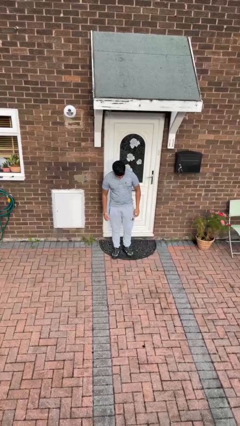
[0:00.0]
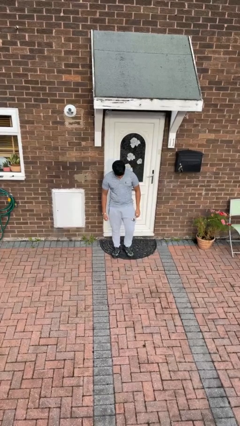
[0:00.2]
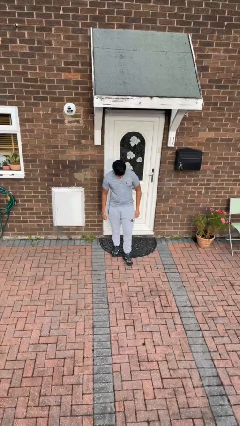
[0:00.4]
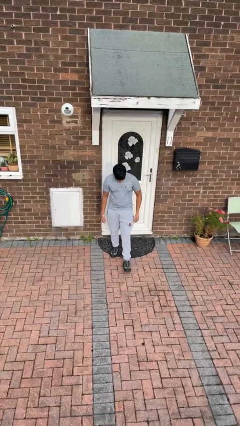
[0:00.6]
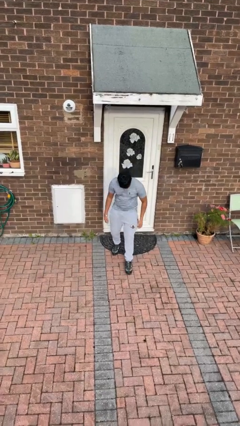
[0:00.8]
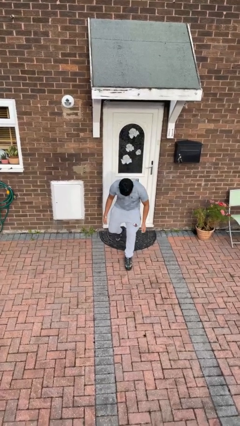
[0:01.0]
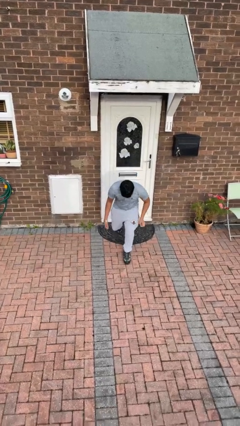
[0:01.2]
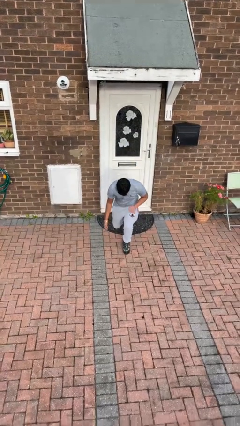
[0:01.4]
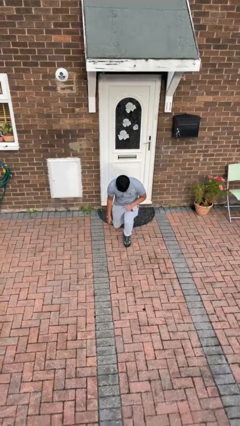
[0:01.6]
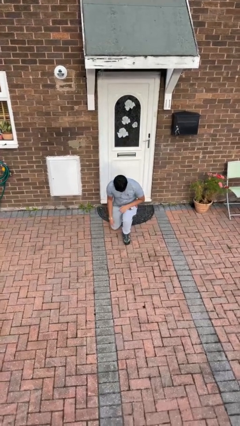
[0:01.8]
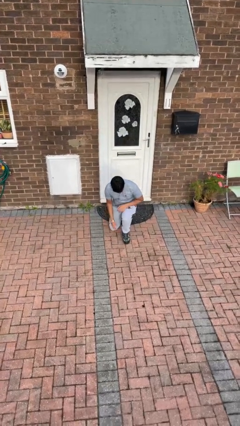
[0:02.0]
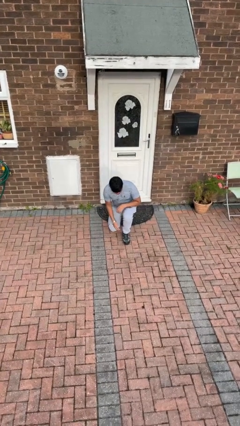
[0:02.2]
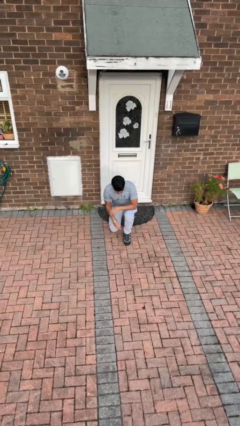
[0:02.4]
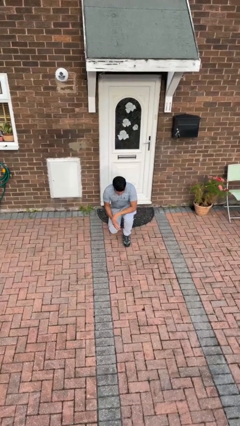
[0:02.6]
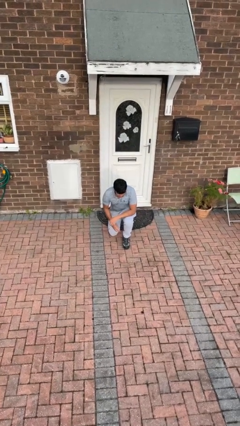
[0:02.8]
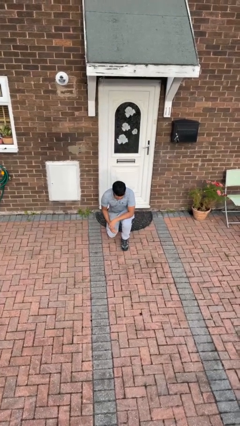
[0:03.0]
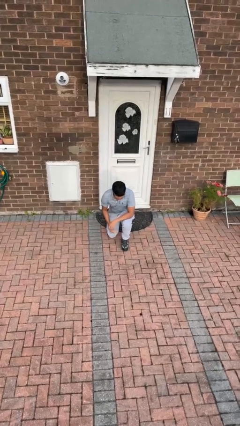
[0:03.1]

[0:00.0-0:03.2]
person kneels

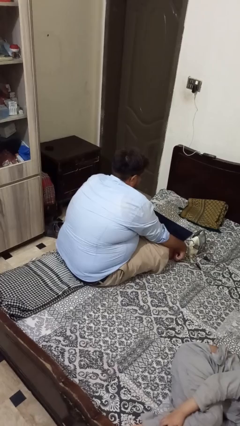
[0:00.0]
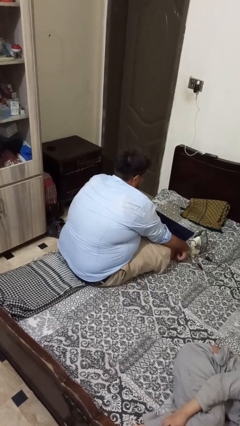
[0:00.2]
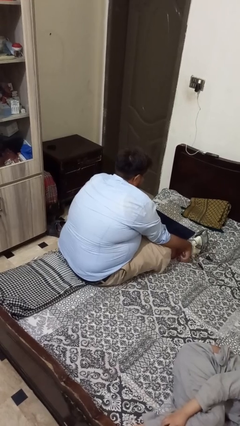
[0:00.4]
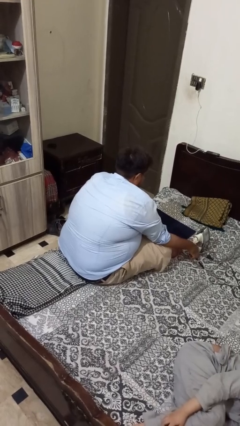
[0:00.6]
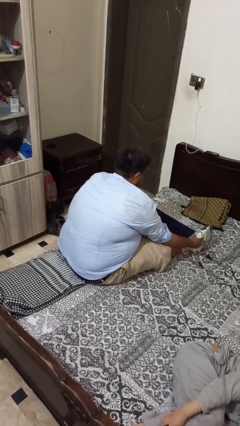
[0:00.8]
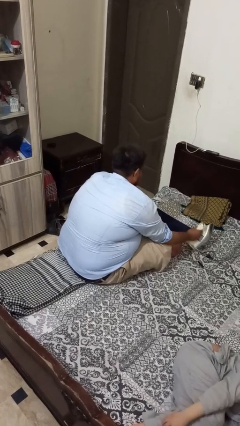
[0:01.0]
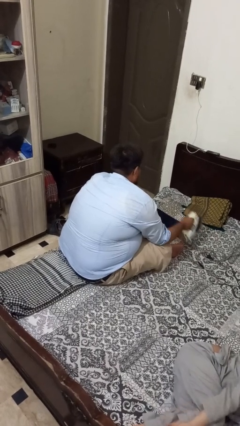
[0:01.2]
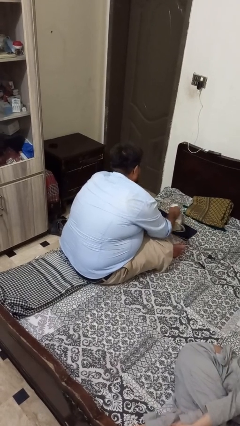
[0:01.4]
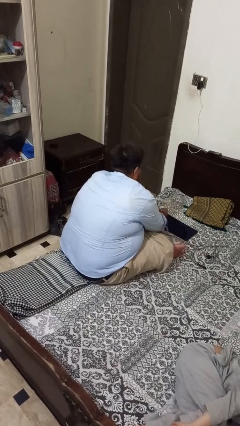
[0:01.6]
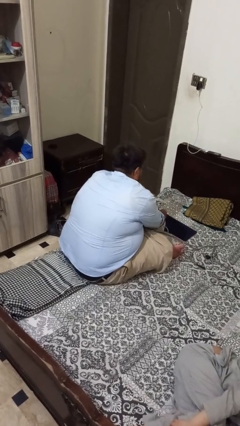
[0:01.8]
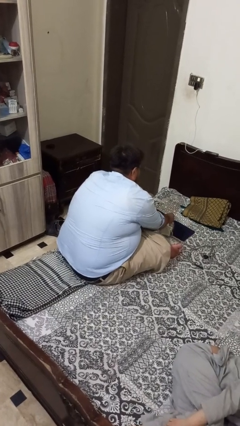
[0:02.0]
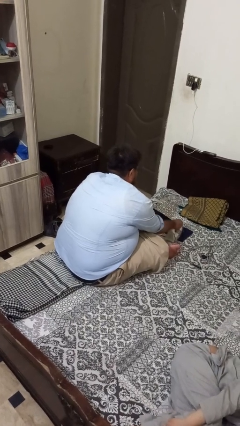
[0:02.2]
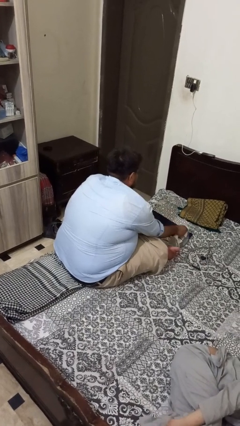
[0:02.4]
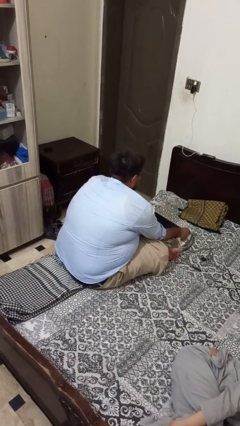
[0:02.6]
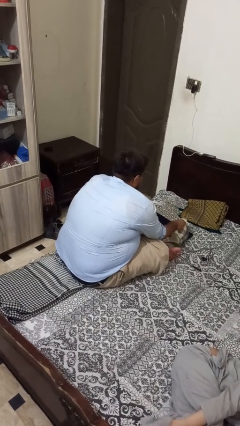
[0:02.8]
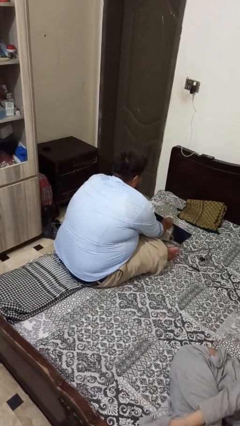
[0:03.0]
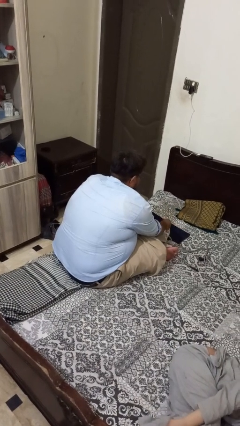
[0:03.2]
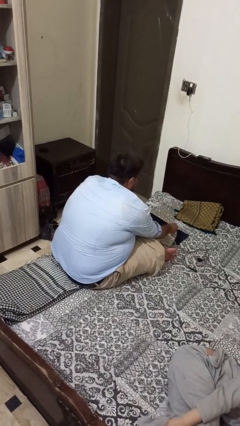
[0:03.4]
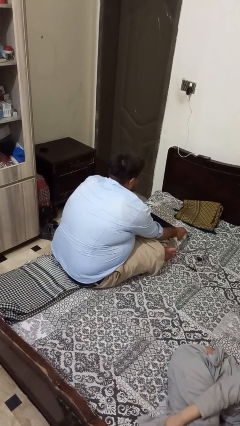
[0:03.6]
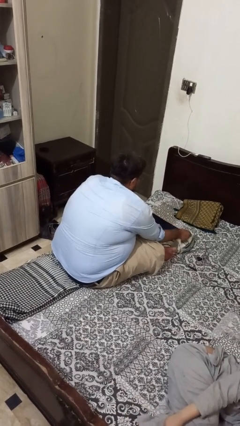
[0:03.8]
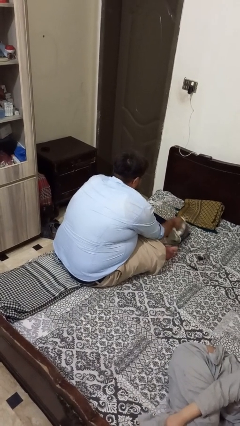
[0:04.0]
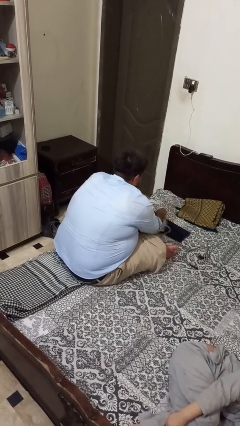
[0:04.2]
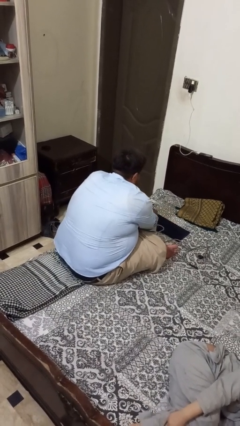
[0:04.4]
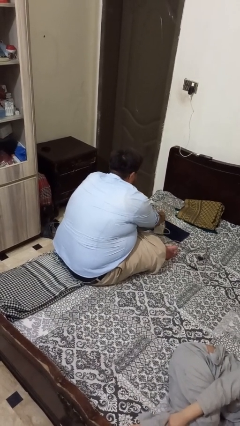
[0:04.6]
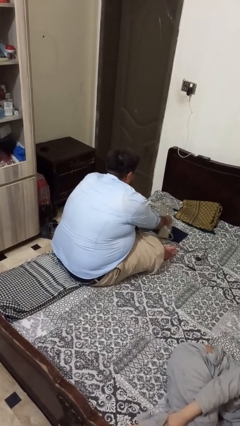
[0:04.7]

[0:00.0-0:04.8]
person irons clothes

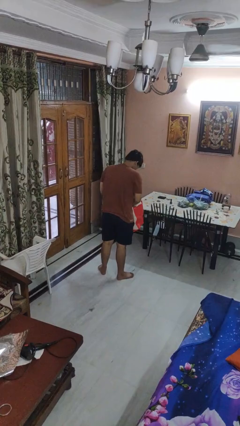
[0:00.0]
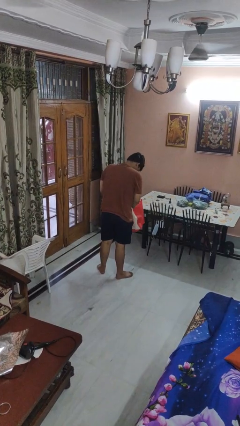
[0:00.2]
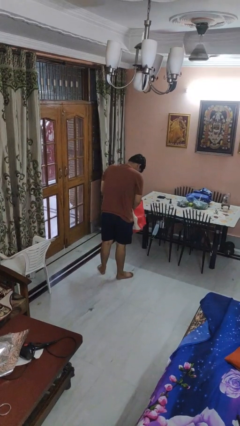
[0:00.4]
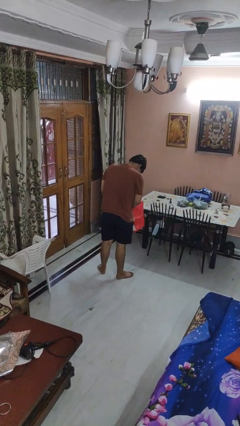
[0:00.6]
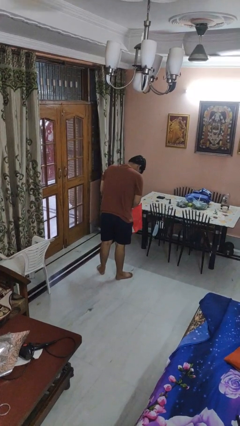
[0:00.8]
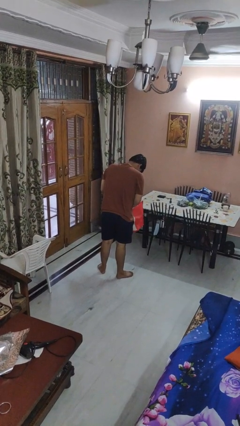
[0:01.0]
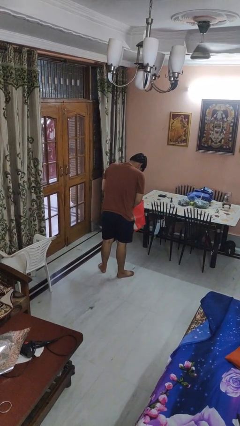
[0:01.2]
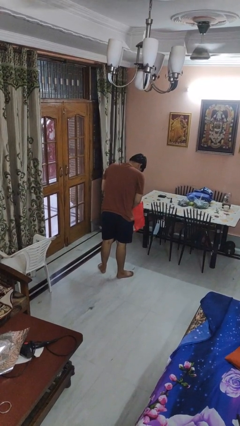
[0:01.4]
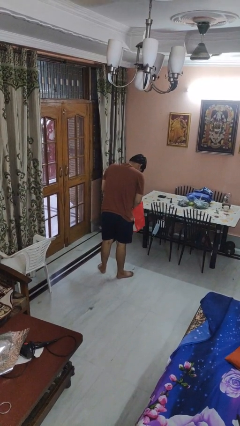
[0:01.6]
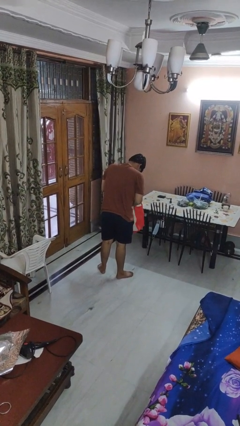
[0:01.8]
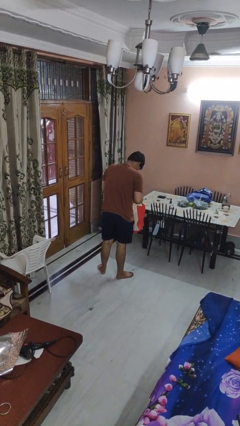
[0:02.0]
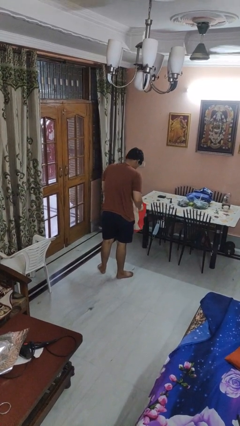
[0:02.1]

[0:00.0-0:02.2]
person searches in bag

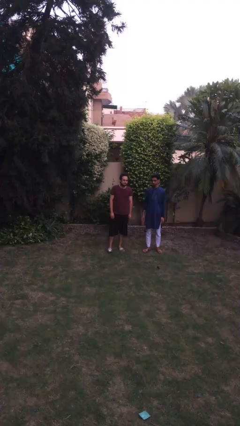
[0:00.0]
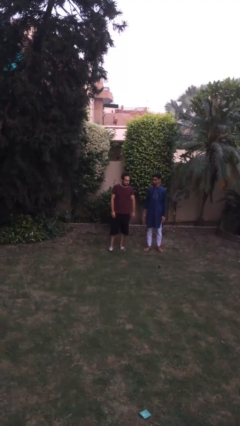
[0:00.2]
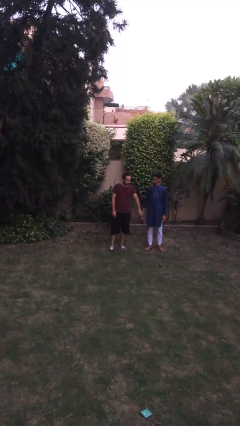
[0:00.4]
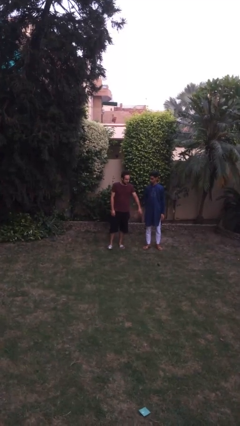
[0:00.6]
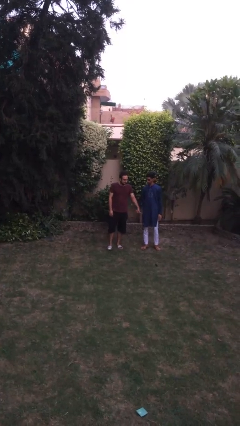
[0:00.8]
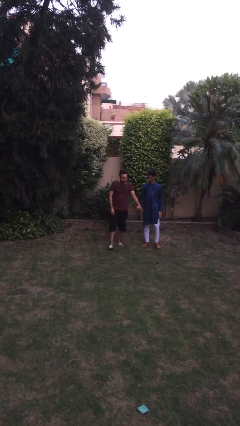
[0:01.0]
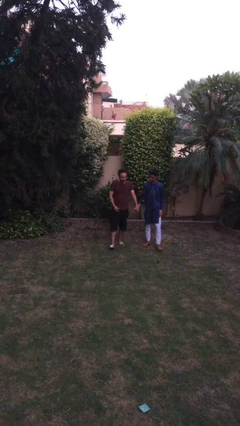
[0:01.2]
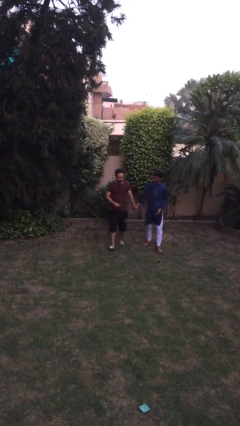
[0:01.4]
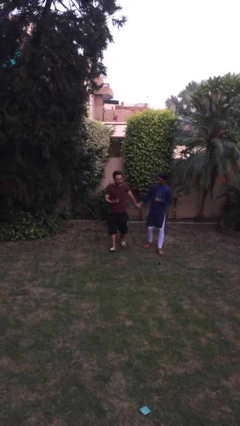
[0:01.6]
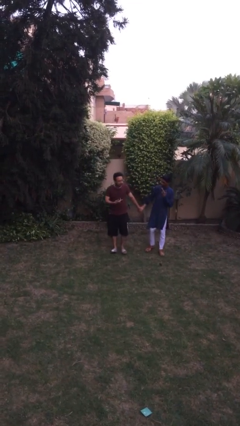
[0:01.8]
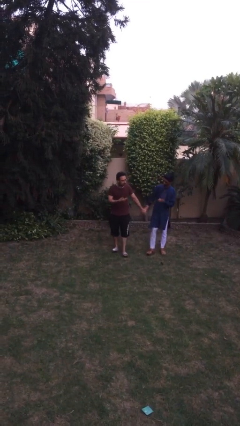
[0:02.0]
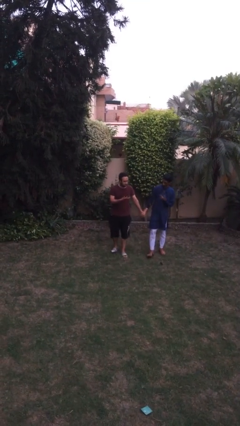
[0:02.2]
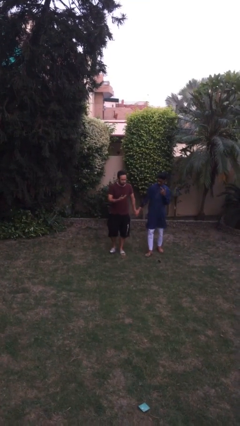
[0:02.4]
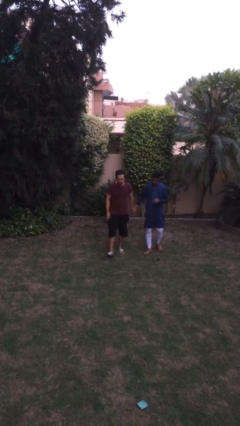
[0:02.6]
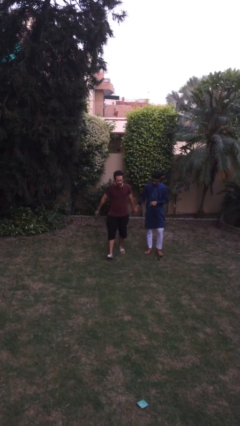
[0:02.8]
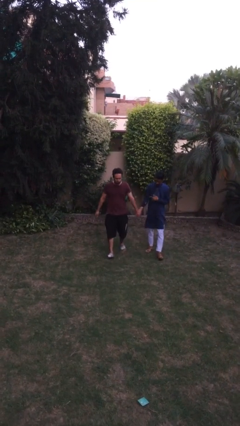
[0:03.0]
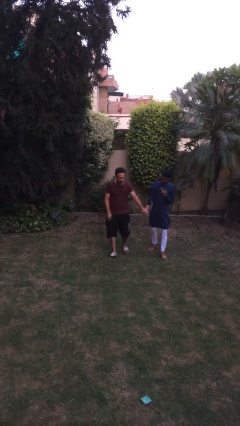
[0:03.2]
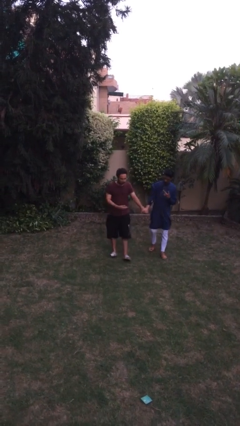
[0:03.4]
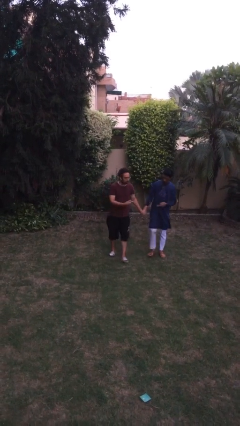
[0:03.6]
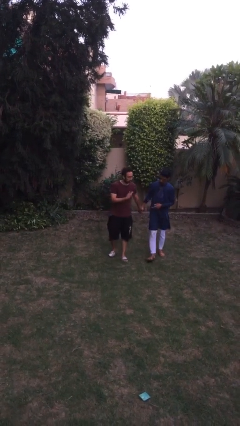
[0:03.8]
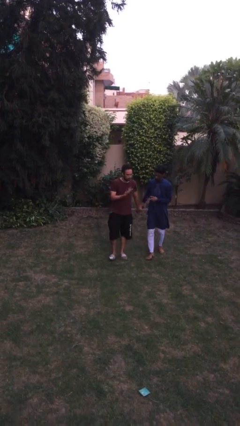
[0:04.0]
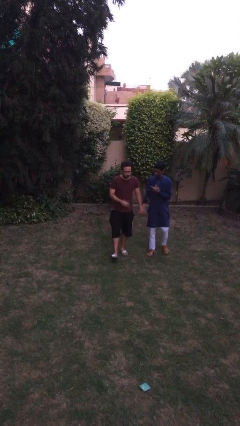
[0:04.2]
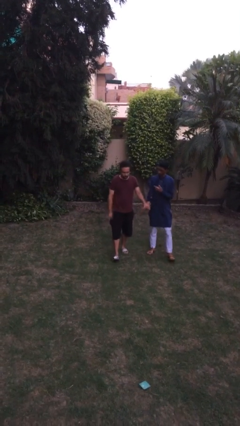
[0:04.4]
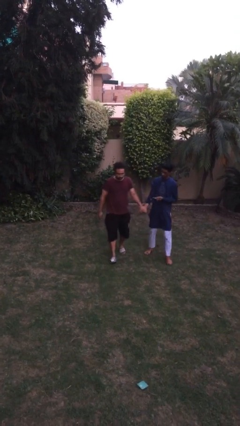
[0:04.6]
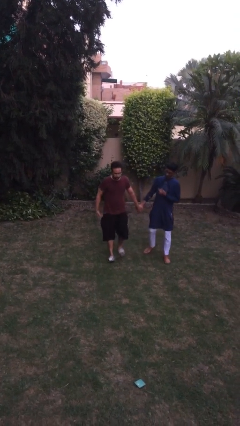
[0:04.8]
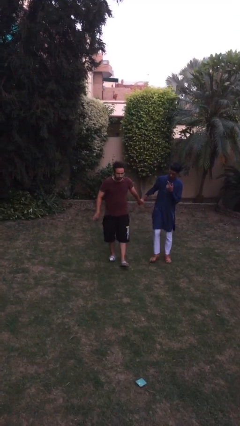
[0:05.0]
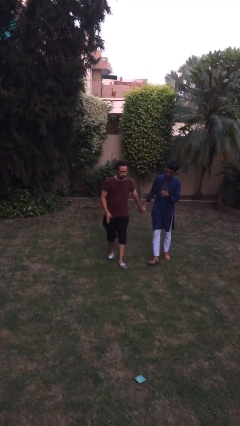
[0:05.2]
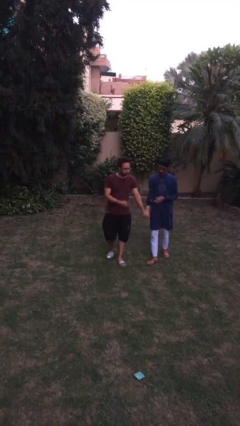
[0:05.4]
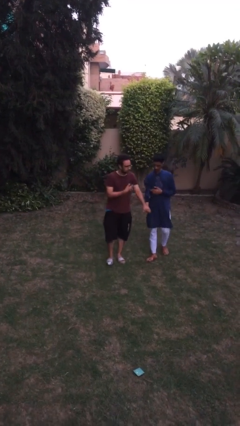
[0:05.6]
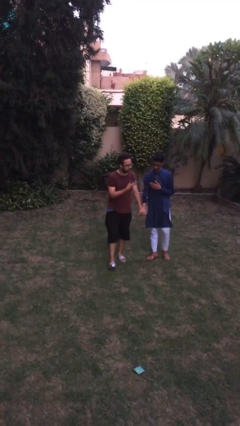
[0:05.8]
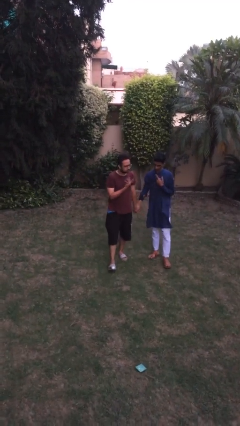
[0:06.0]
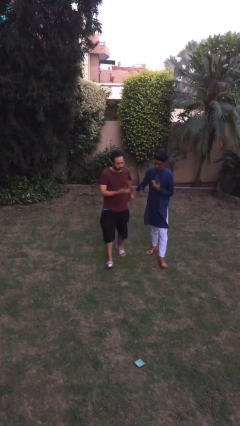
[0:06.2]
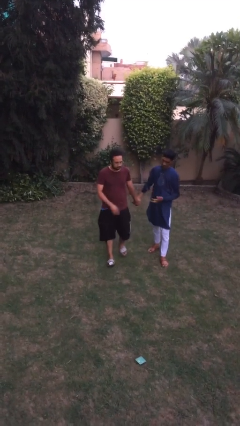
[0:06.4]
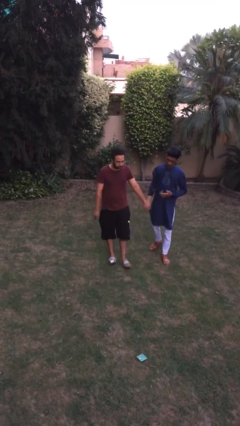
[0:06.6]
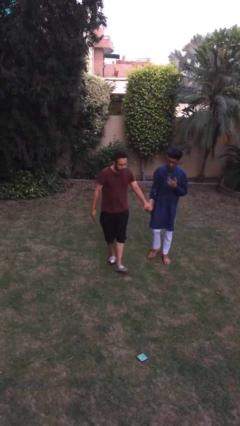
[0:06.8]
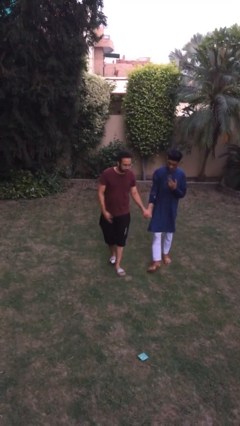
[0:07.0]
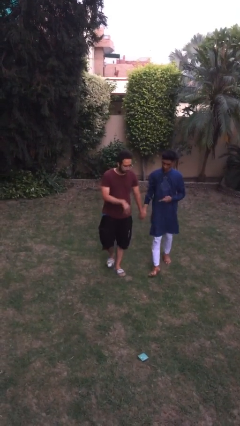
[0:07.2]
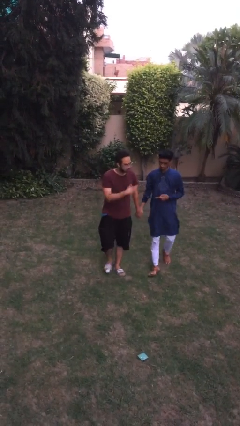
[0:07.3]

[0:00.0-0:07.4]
person holds hand
